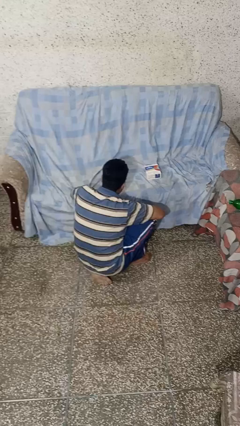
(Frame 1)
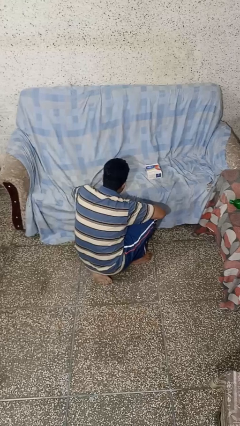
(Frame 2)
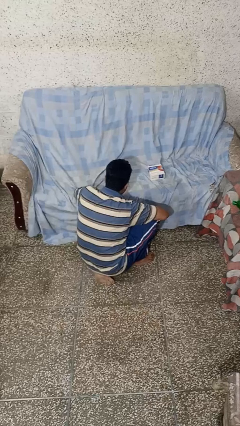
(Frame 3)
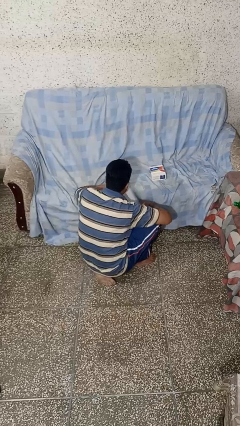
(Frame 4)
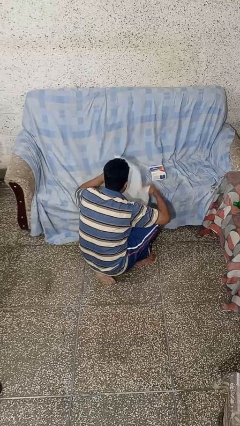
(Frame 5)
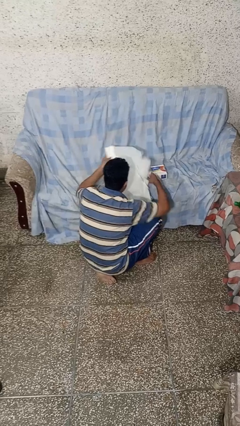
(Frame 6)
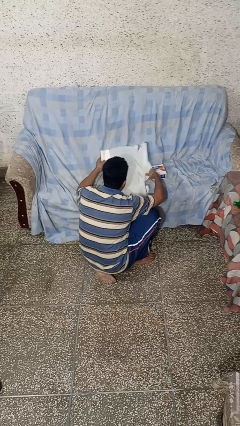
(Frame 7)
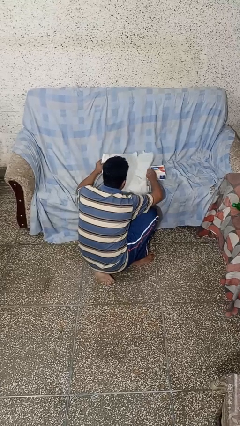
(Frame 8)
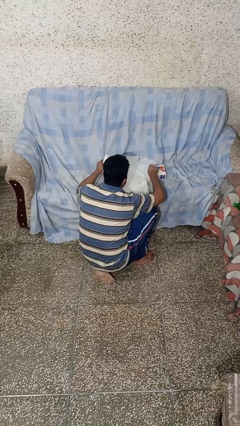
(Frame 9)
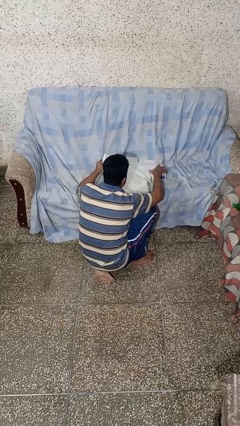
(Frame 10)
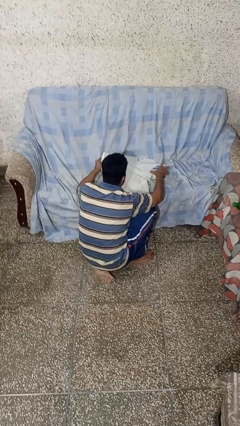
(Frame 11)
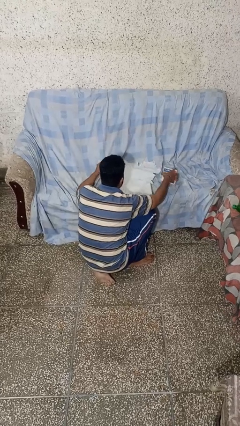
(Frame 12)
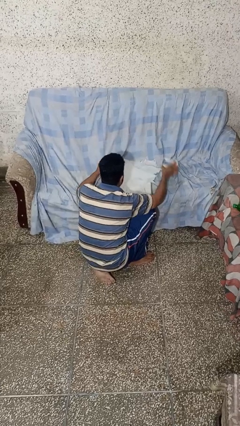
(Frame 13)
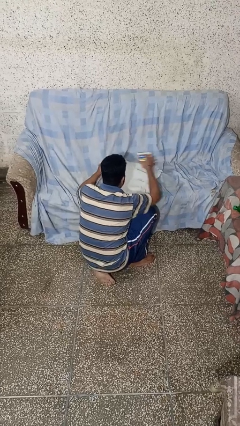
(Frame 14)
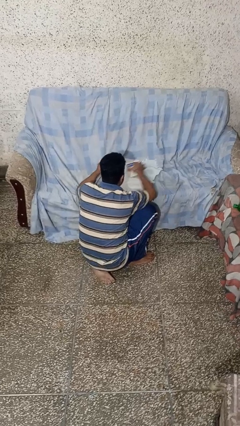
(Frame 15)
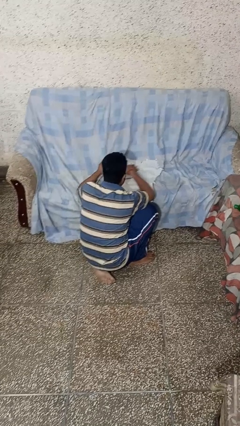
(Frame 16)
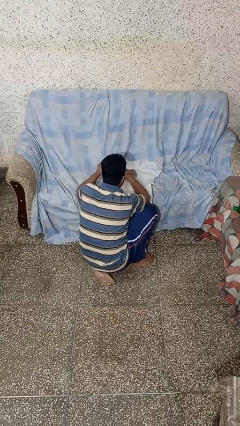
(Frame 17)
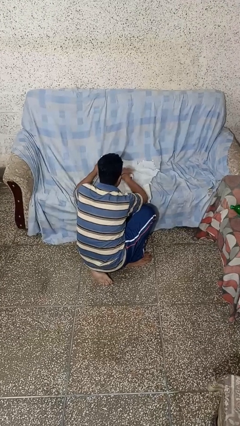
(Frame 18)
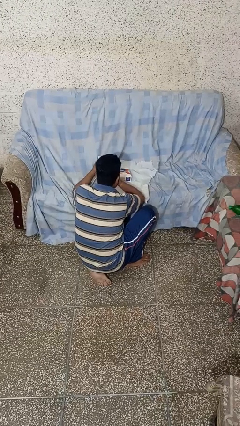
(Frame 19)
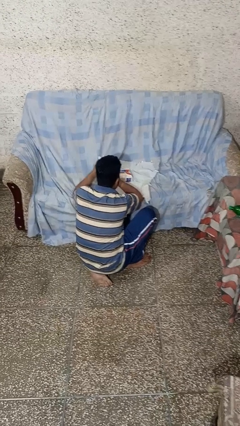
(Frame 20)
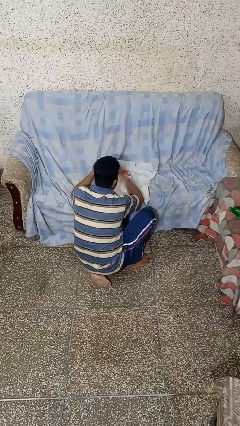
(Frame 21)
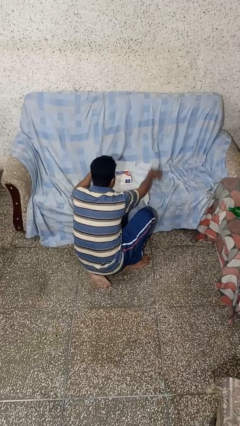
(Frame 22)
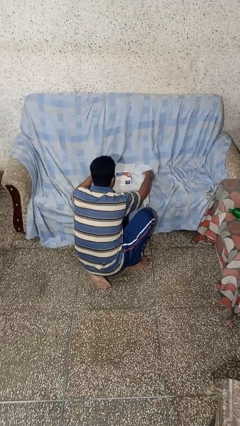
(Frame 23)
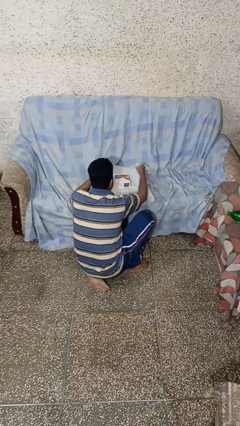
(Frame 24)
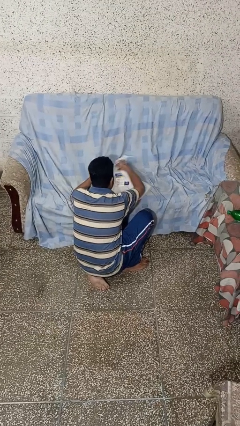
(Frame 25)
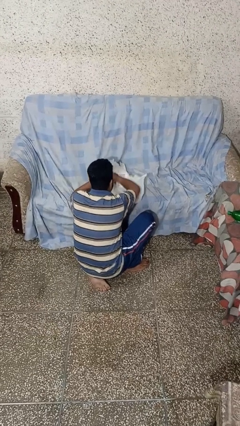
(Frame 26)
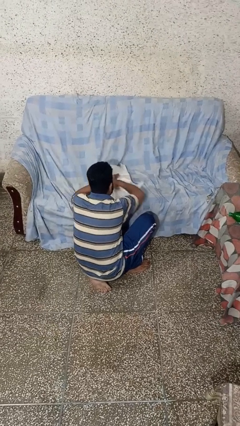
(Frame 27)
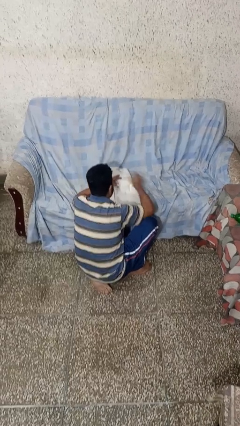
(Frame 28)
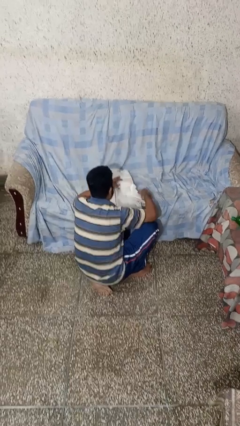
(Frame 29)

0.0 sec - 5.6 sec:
person wraps box

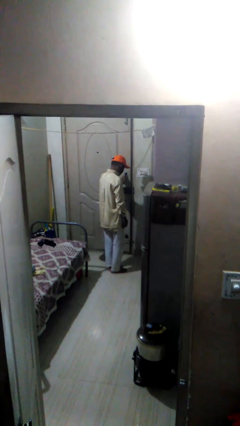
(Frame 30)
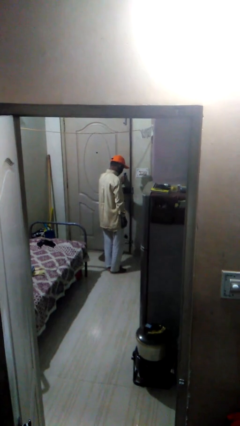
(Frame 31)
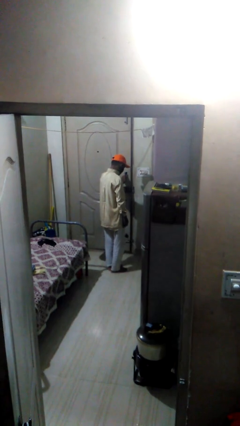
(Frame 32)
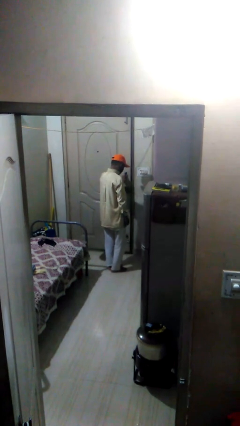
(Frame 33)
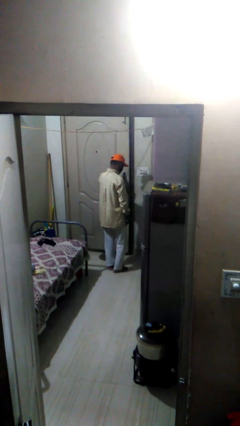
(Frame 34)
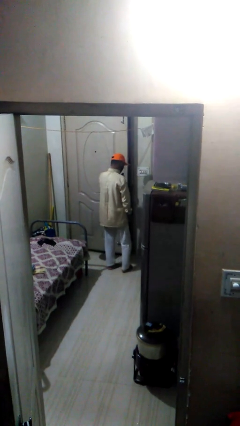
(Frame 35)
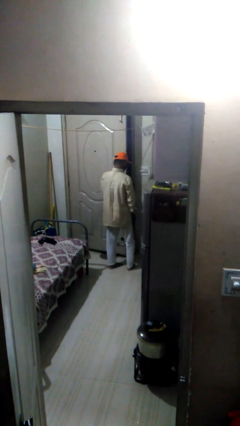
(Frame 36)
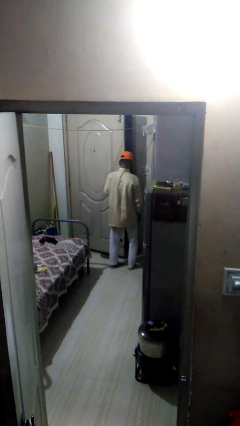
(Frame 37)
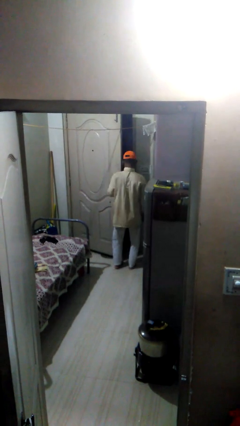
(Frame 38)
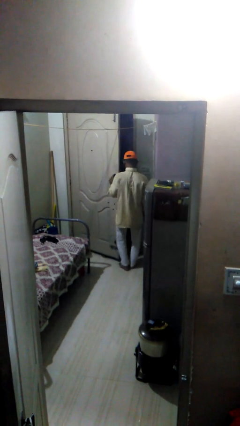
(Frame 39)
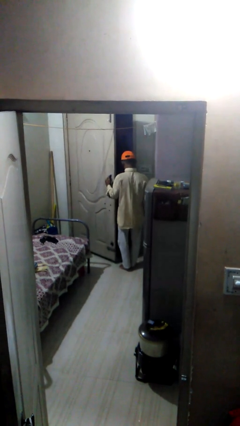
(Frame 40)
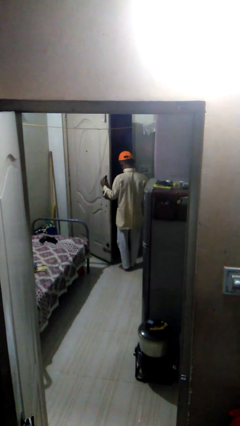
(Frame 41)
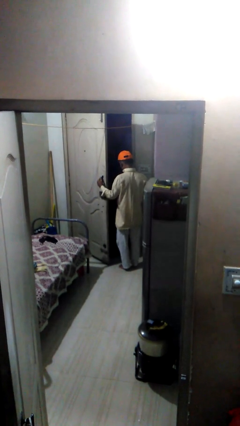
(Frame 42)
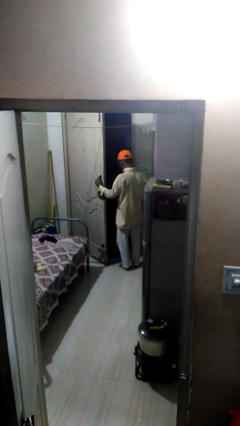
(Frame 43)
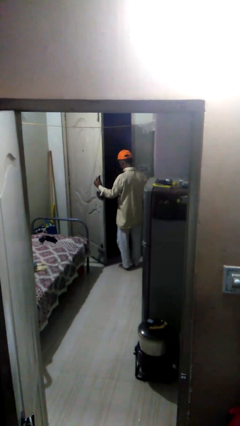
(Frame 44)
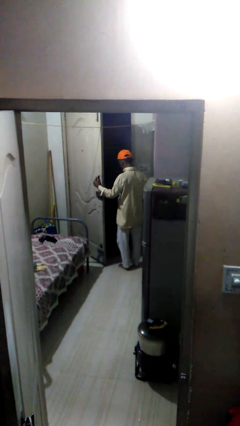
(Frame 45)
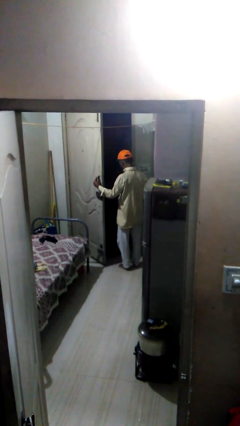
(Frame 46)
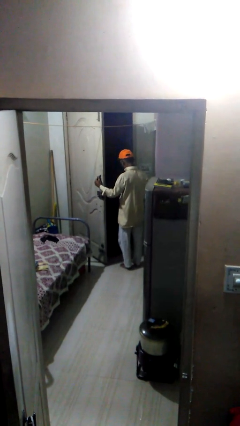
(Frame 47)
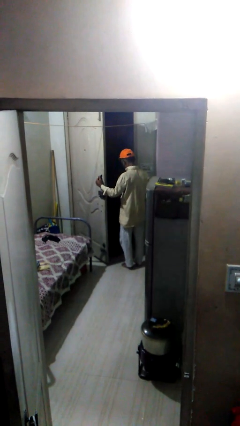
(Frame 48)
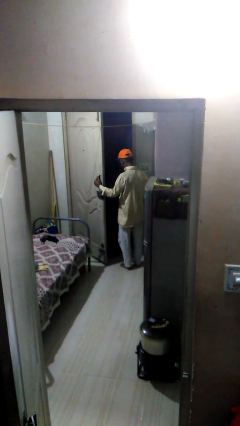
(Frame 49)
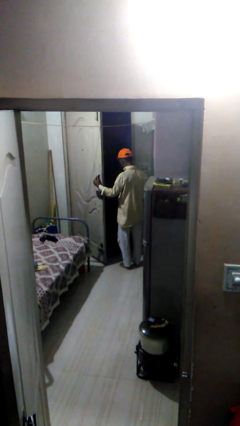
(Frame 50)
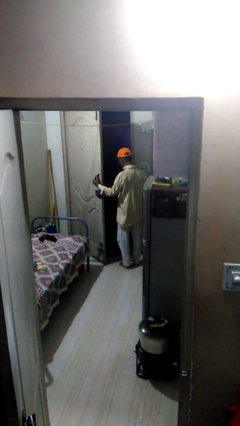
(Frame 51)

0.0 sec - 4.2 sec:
person opens facility door

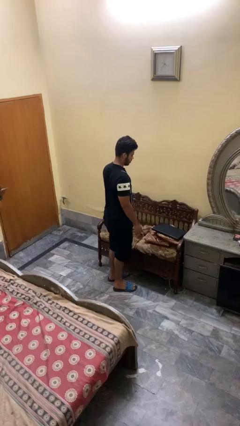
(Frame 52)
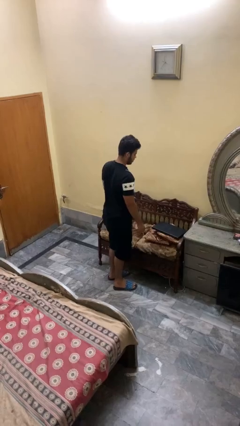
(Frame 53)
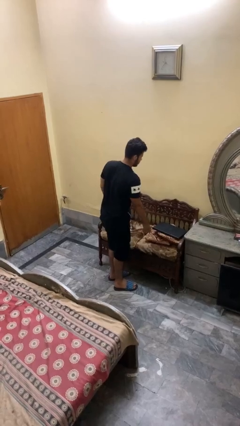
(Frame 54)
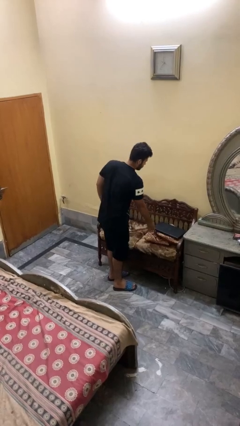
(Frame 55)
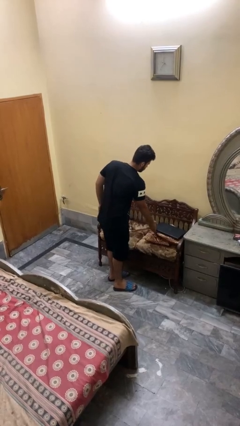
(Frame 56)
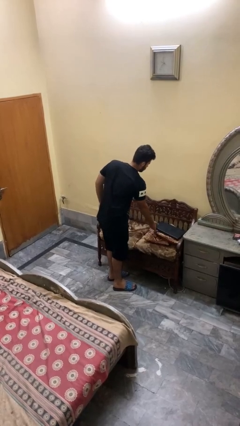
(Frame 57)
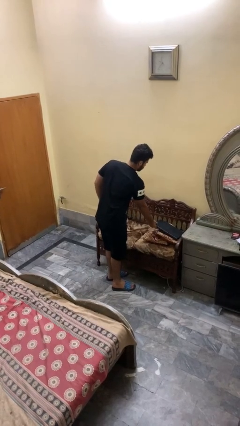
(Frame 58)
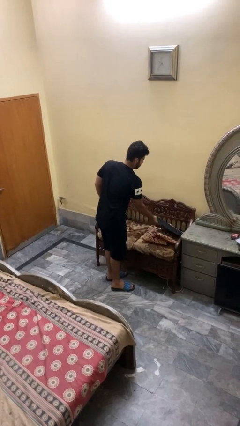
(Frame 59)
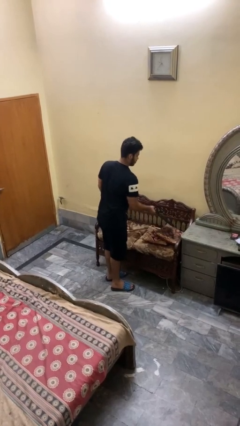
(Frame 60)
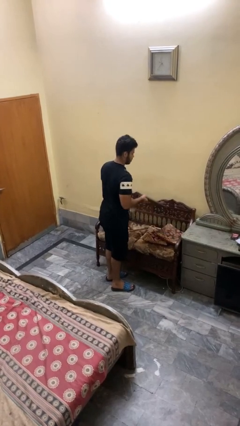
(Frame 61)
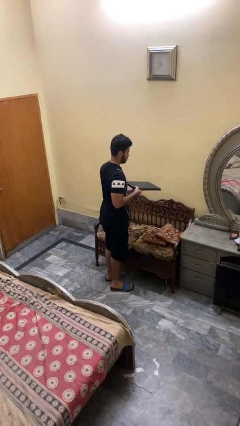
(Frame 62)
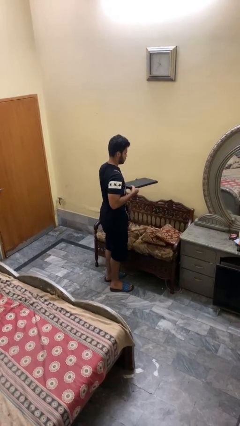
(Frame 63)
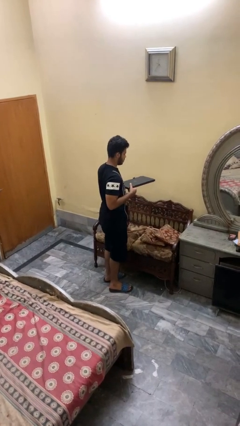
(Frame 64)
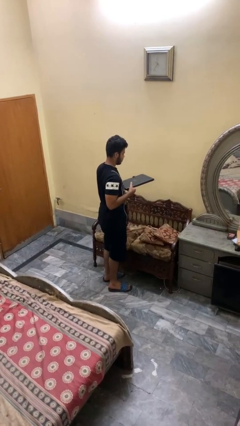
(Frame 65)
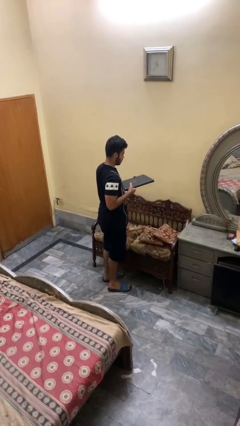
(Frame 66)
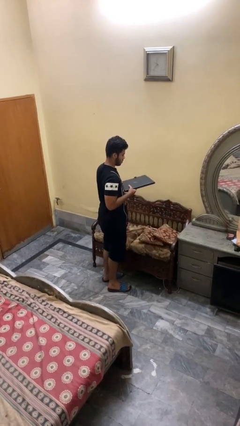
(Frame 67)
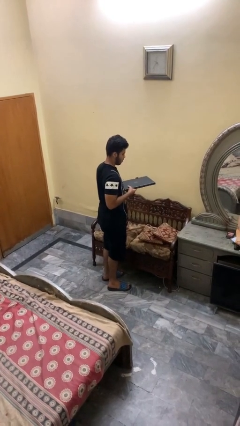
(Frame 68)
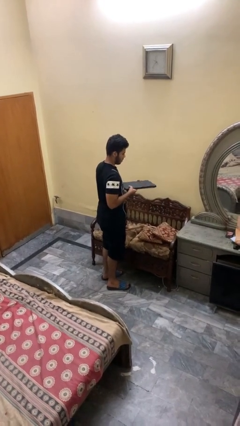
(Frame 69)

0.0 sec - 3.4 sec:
person picks up object from couch

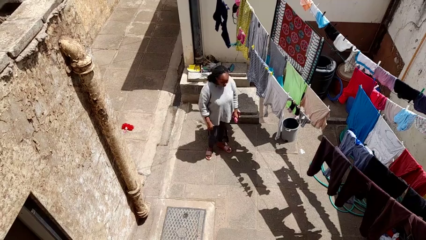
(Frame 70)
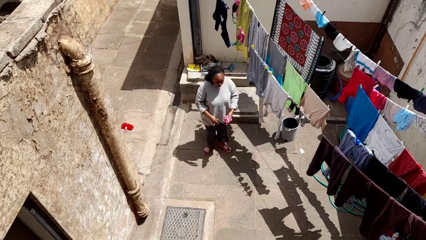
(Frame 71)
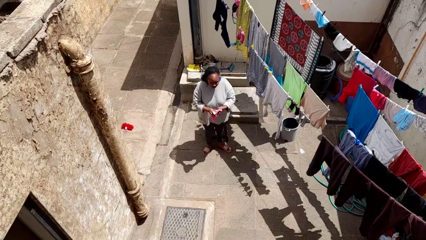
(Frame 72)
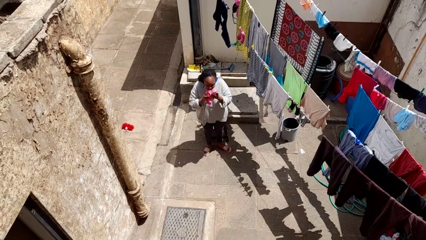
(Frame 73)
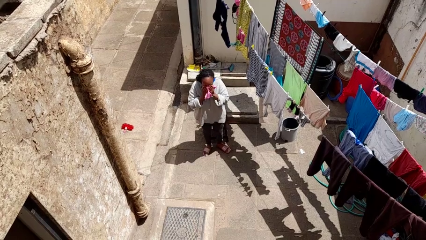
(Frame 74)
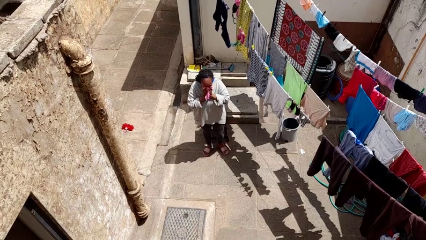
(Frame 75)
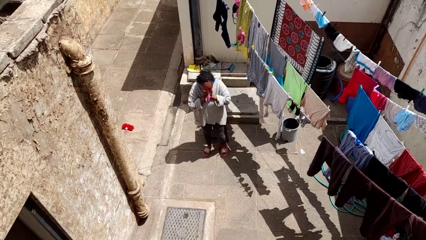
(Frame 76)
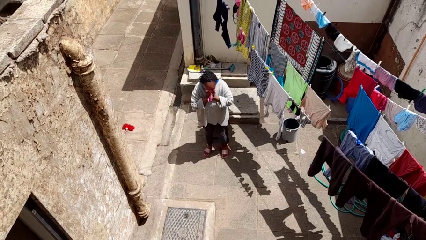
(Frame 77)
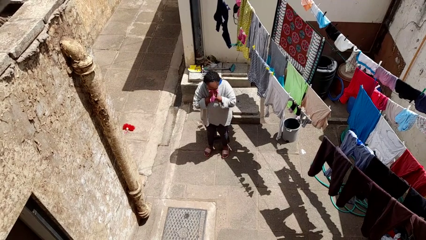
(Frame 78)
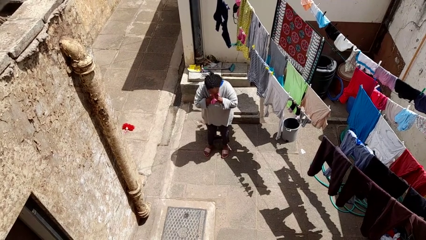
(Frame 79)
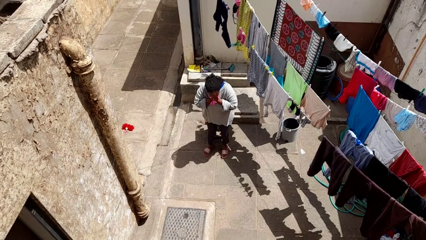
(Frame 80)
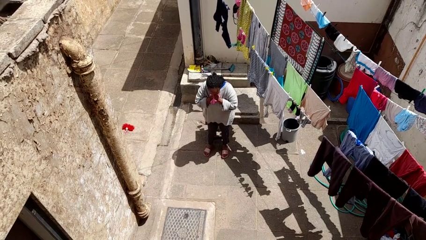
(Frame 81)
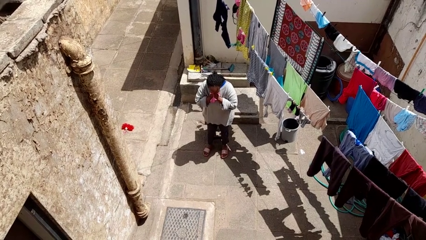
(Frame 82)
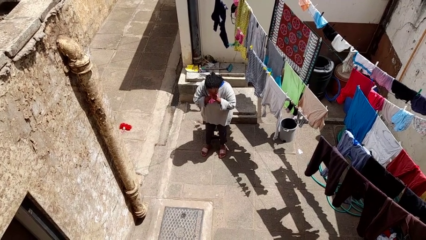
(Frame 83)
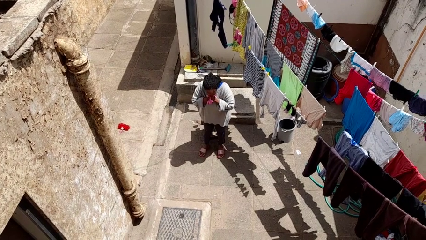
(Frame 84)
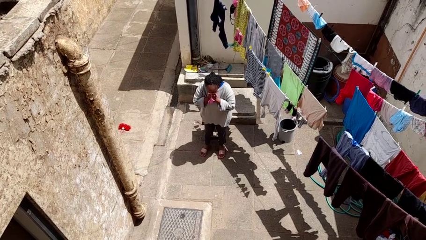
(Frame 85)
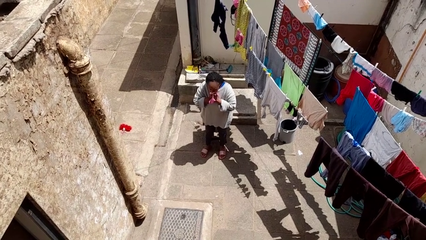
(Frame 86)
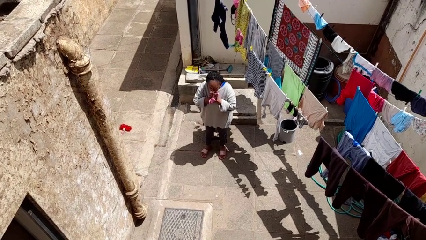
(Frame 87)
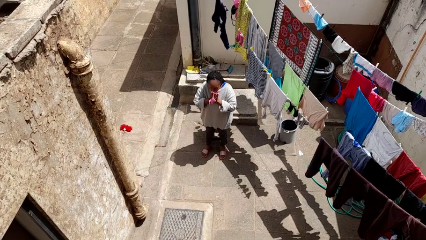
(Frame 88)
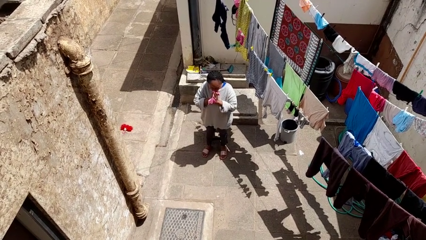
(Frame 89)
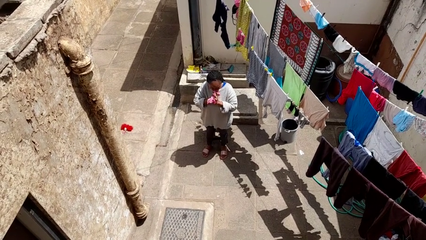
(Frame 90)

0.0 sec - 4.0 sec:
person blows nose

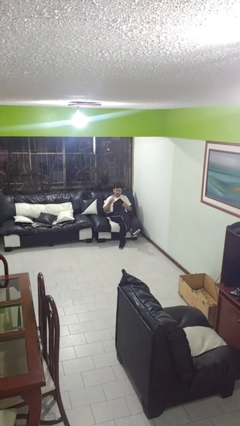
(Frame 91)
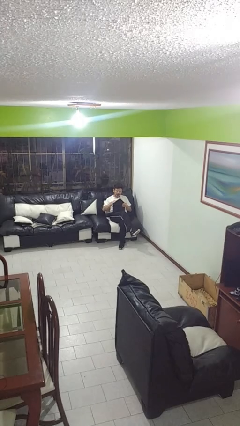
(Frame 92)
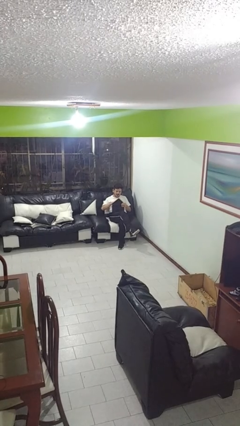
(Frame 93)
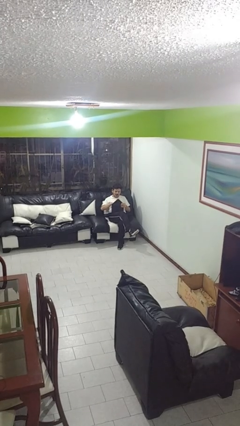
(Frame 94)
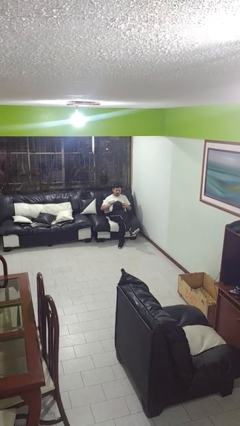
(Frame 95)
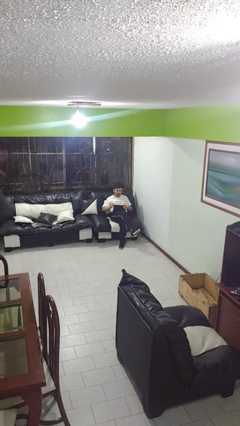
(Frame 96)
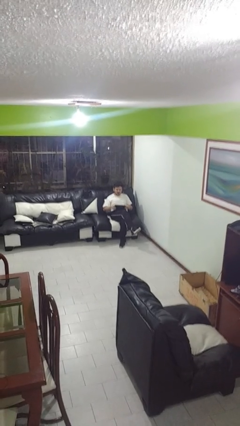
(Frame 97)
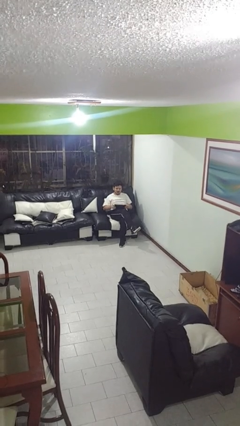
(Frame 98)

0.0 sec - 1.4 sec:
person puts object into purse
